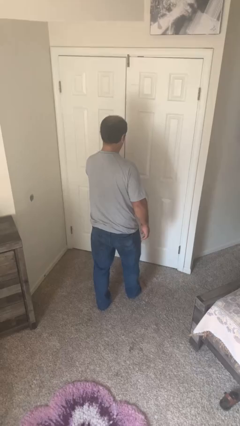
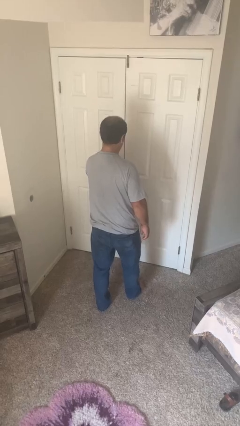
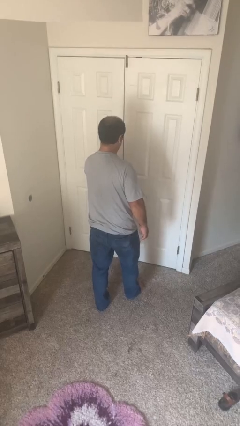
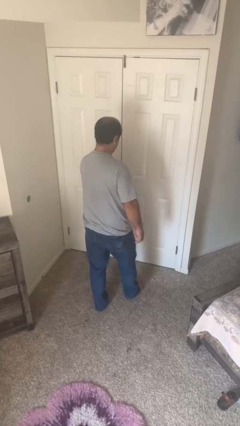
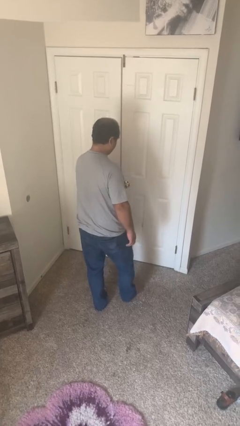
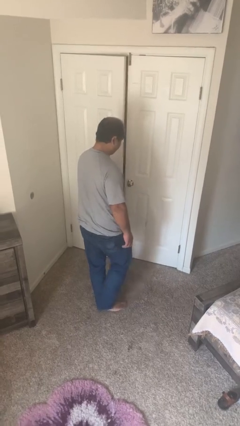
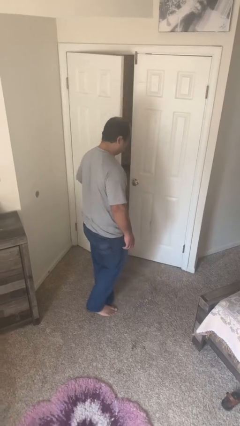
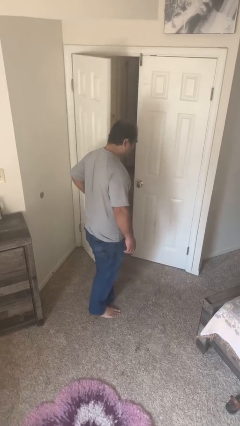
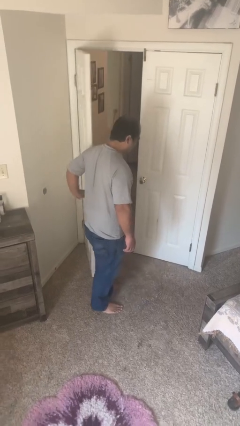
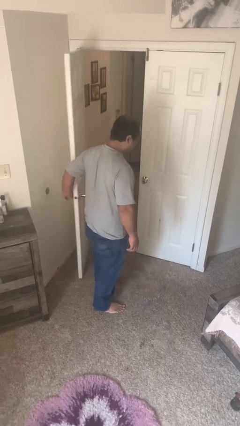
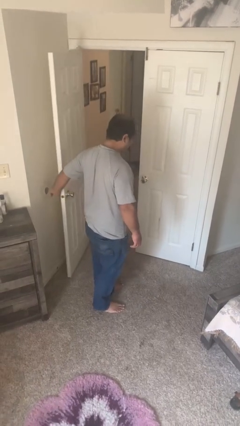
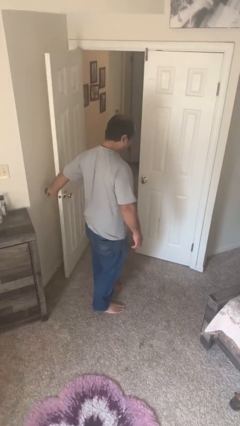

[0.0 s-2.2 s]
person opens facility door

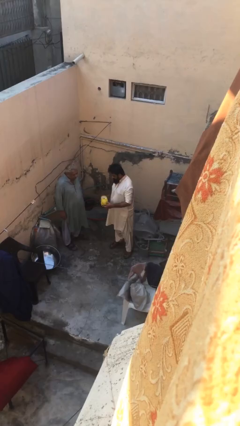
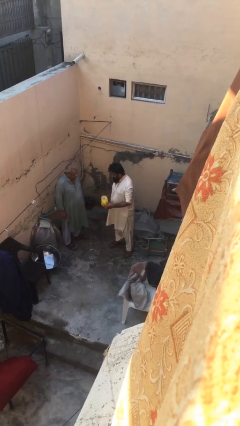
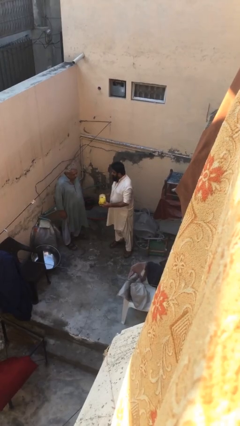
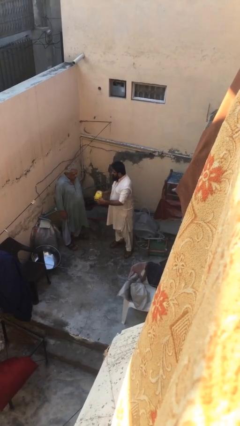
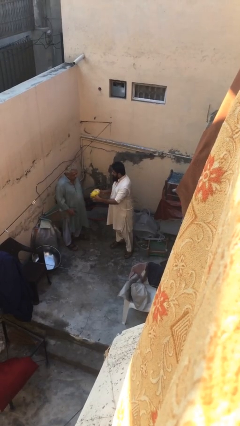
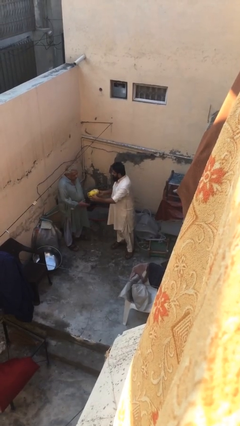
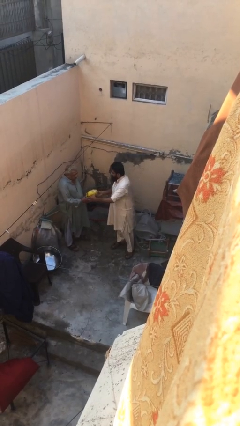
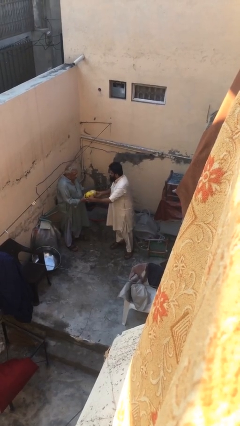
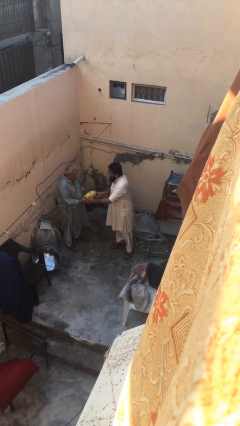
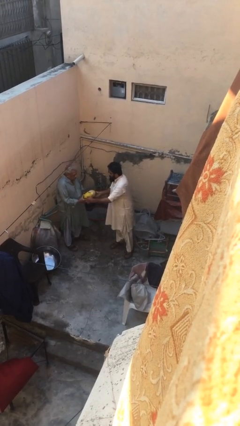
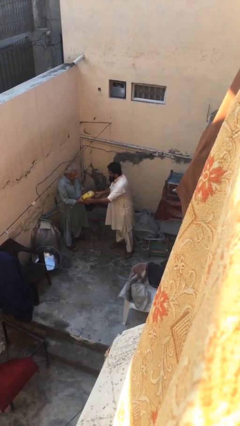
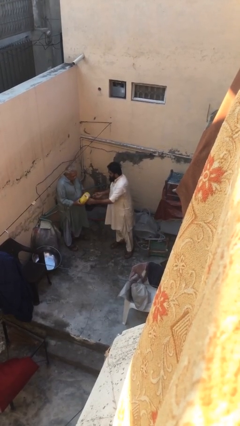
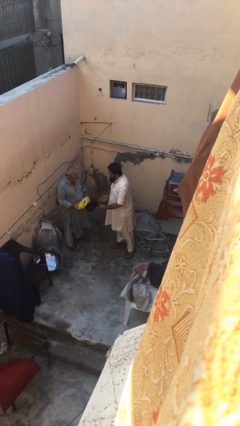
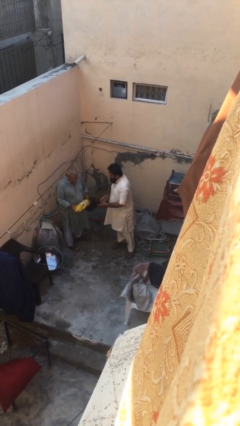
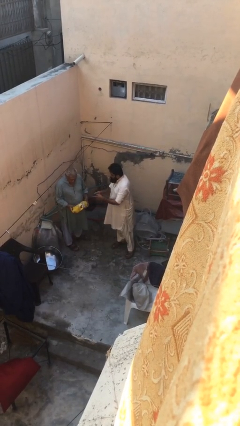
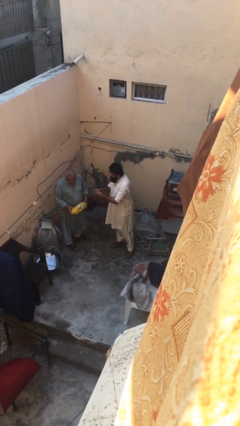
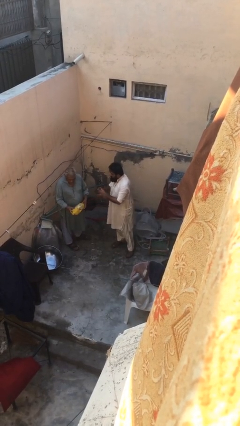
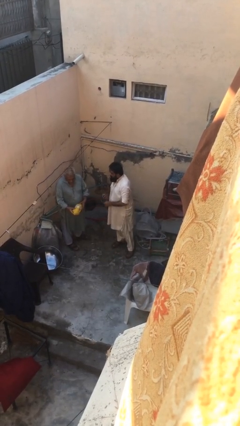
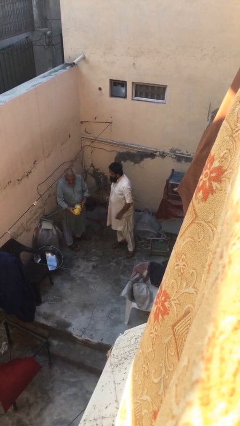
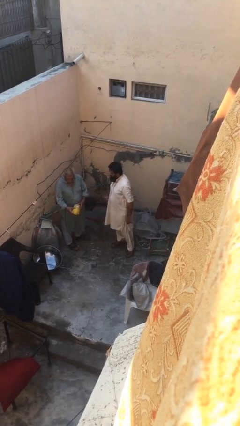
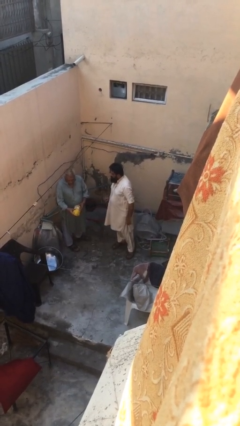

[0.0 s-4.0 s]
person transfers object to person

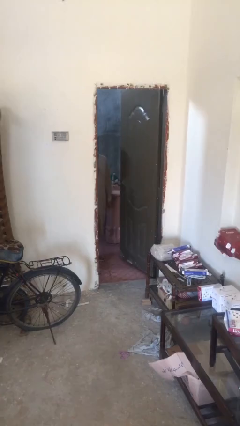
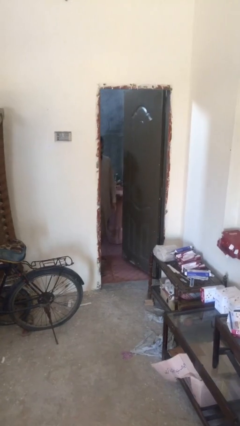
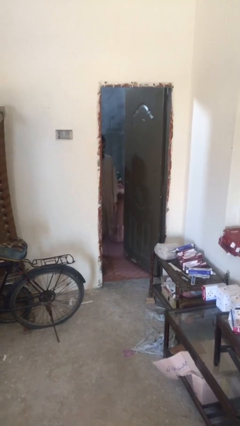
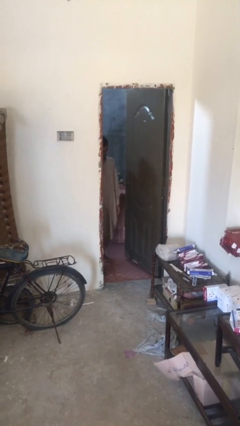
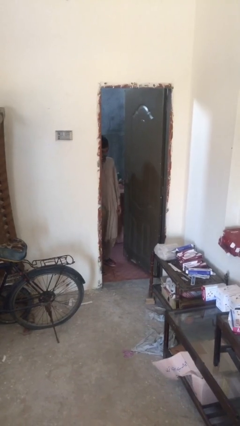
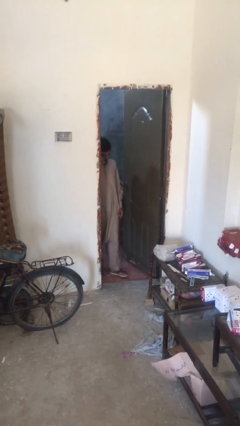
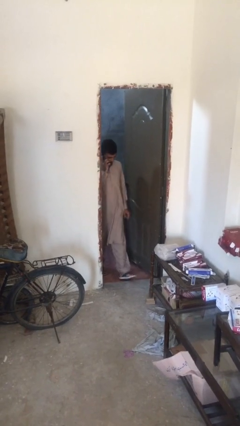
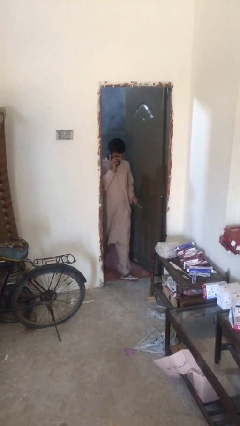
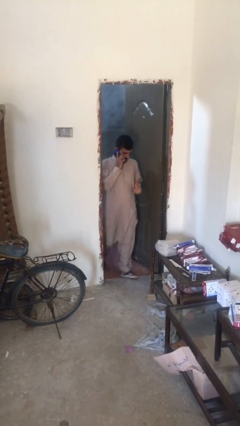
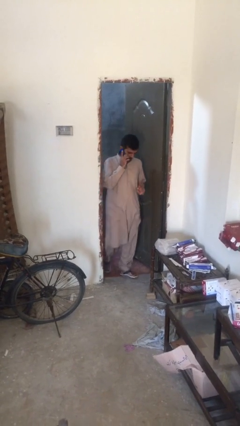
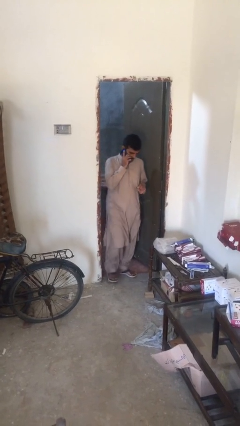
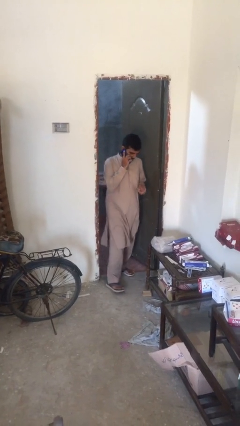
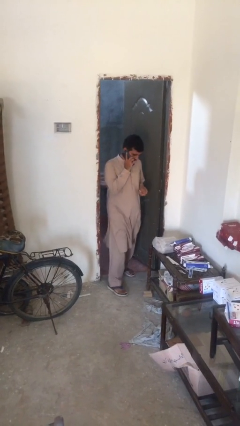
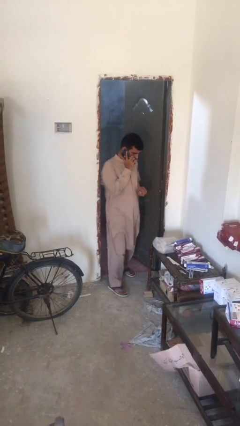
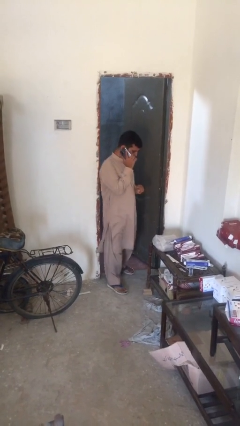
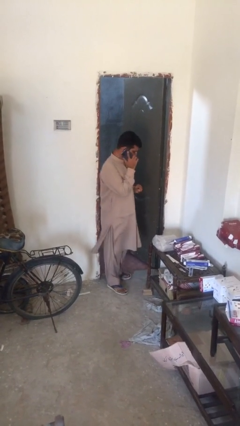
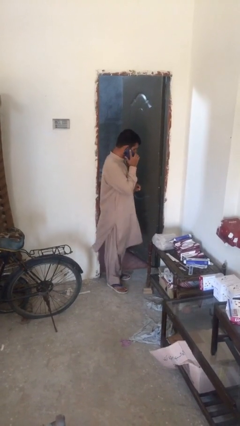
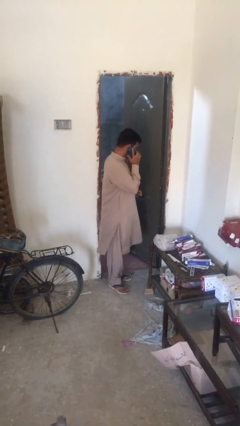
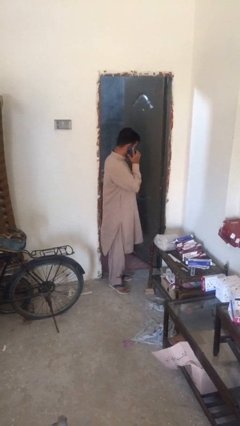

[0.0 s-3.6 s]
person enters scene through structure

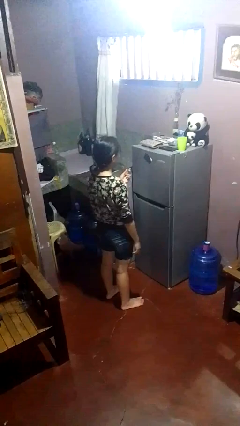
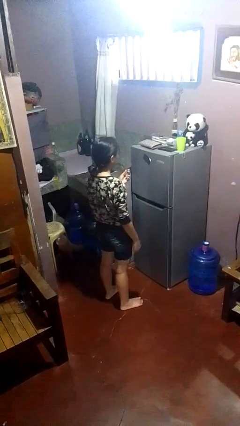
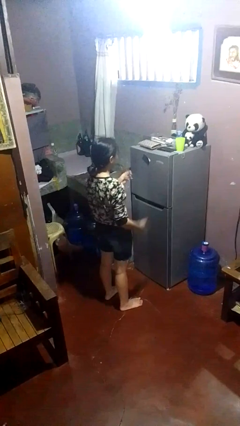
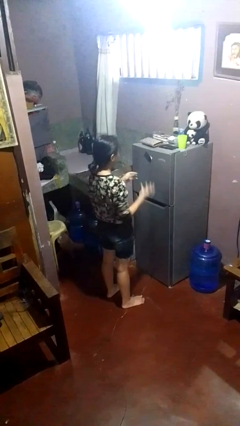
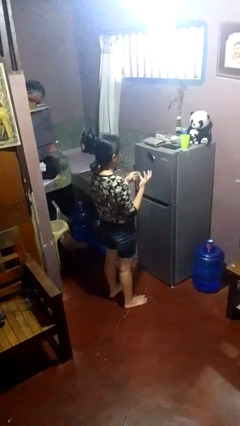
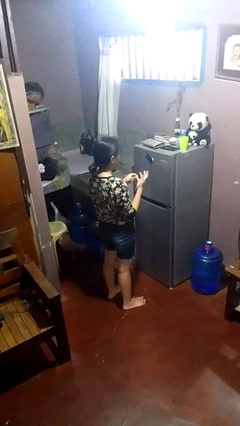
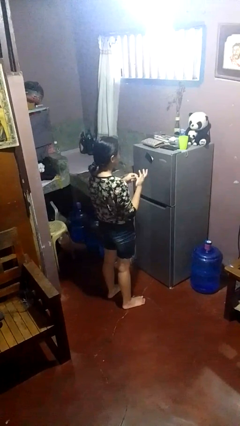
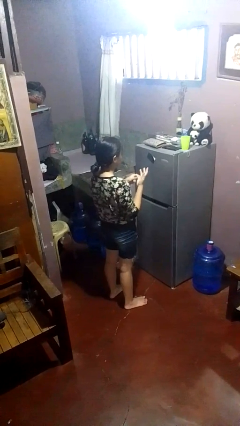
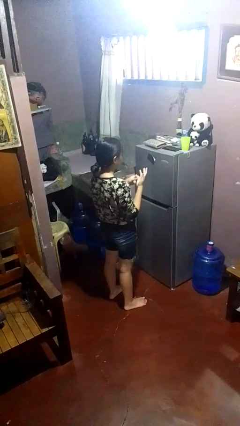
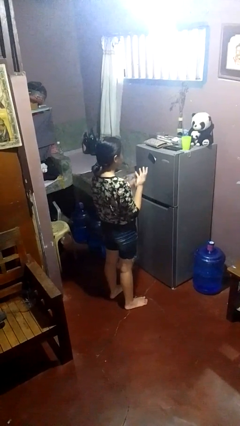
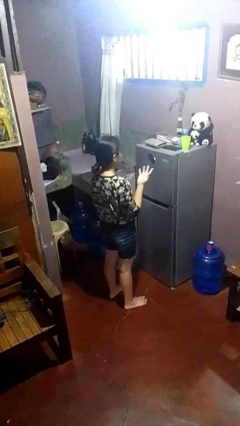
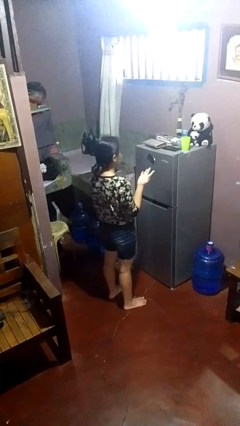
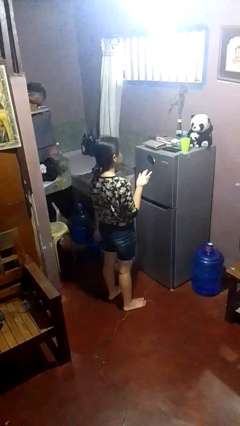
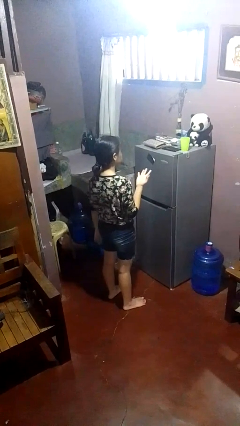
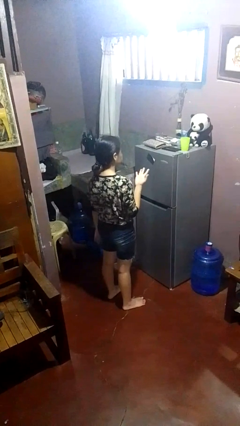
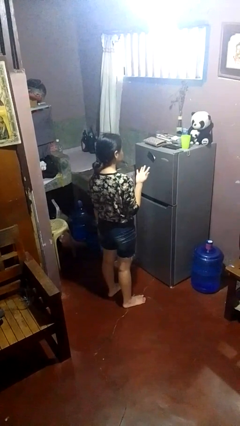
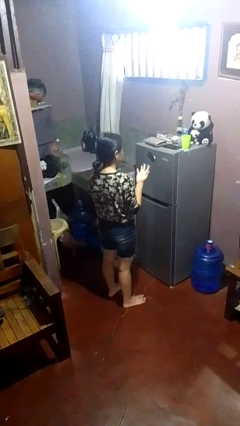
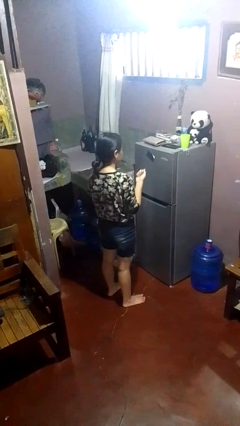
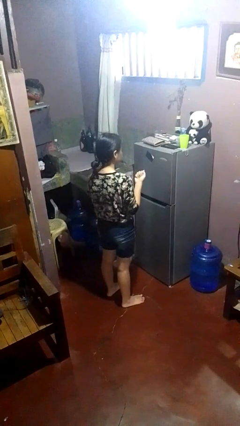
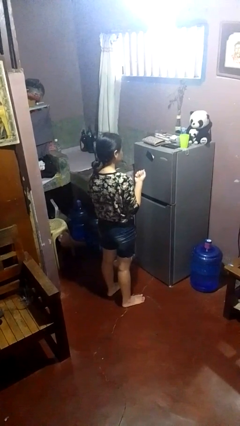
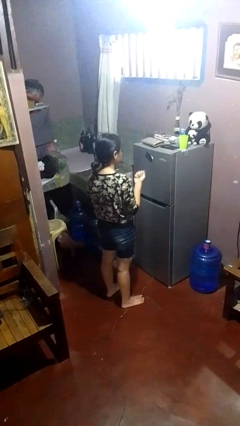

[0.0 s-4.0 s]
person puts on ring

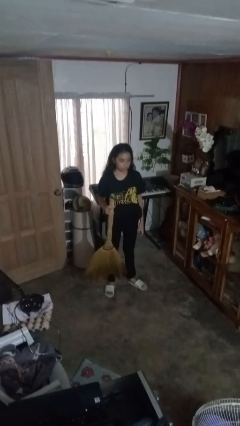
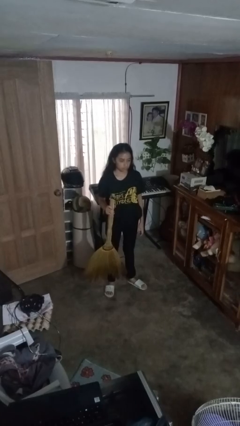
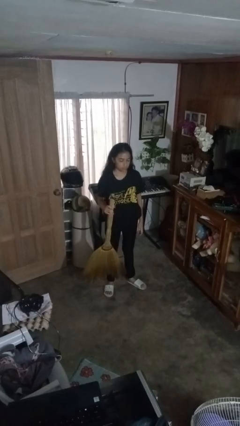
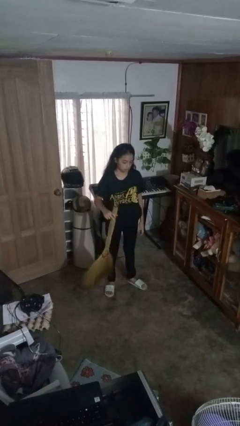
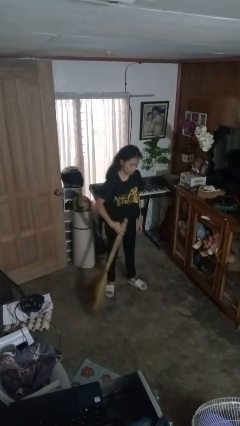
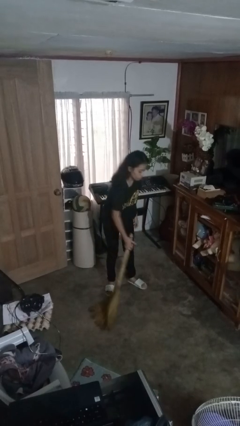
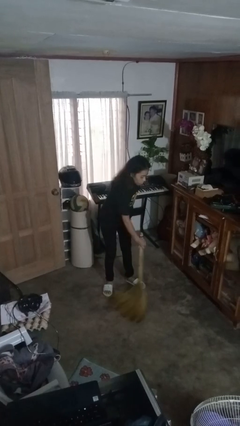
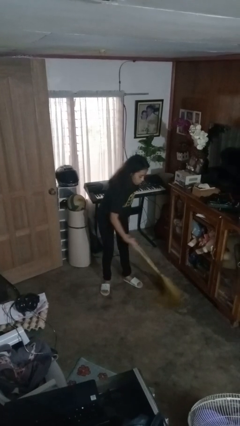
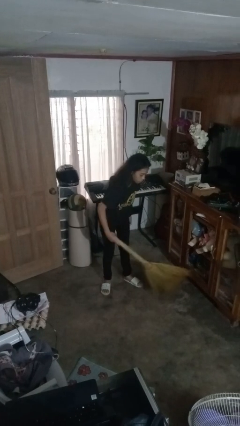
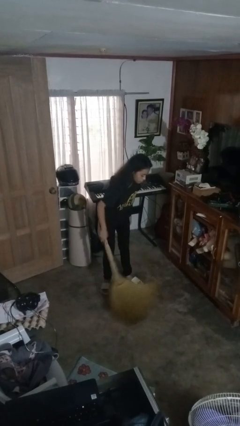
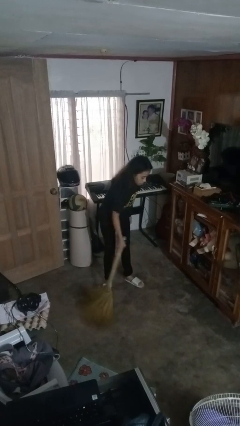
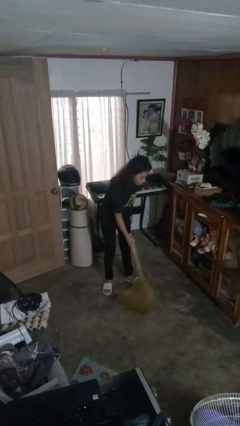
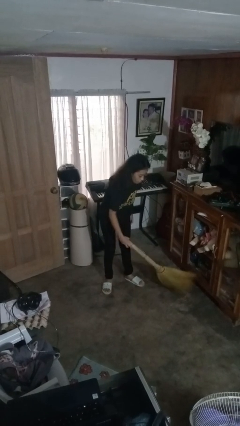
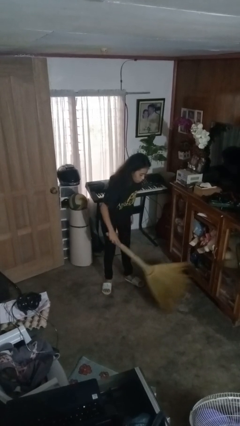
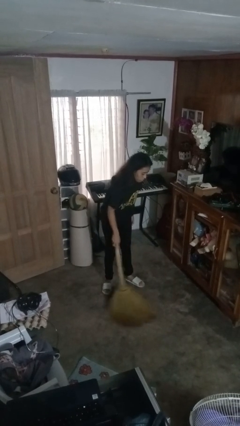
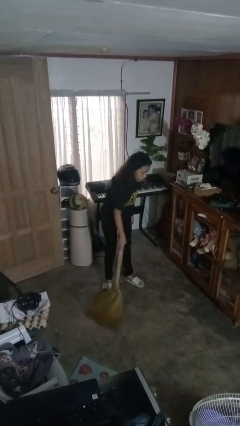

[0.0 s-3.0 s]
person sweeps floor

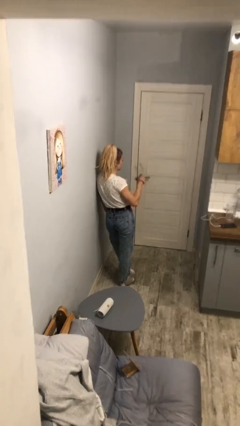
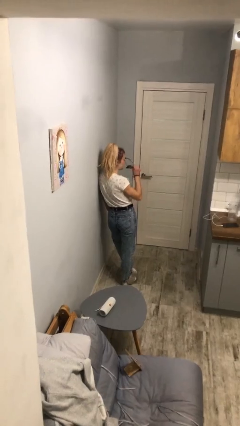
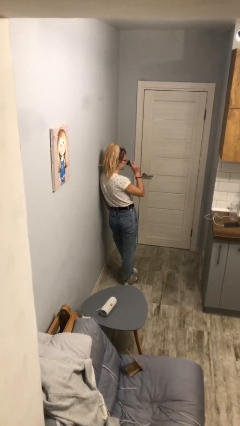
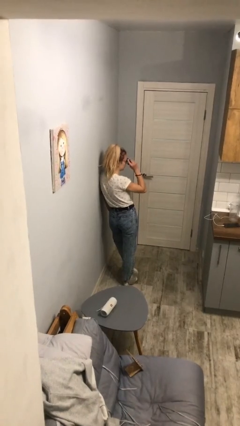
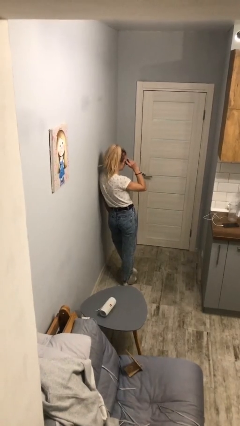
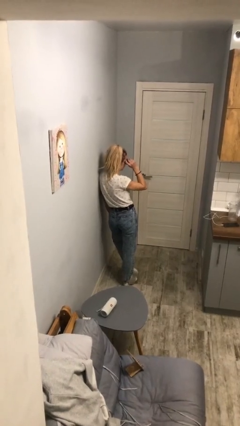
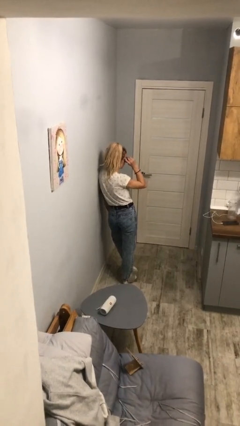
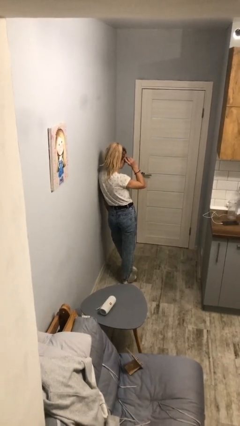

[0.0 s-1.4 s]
person puts on glasses
